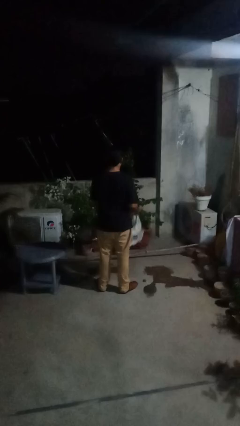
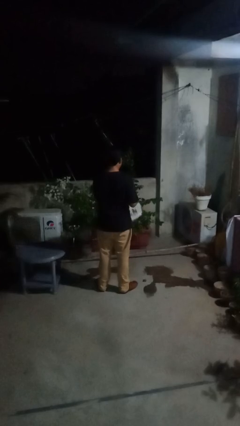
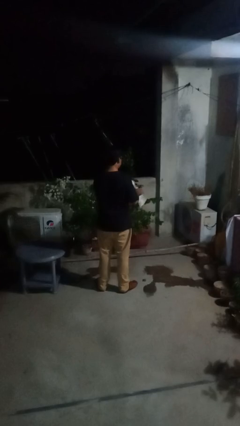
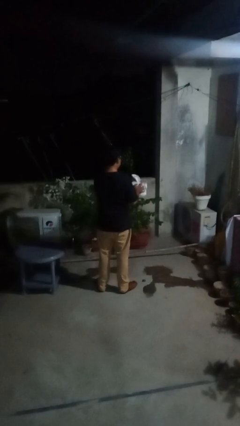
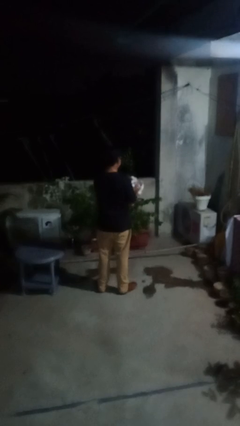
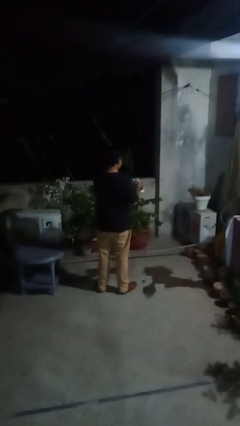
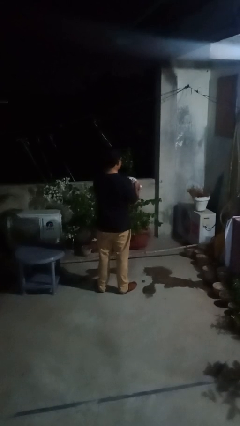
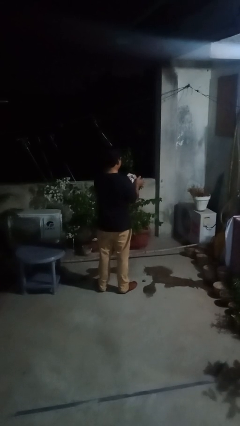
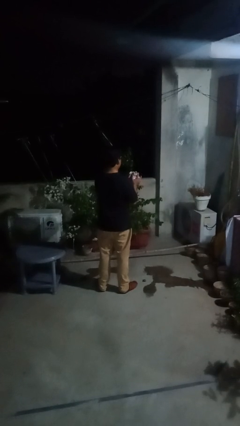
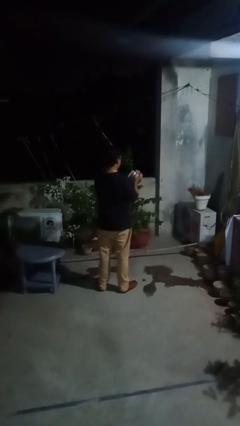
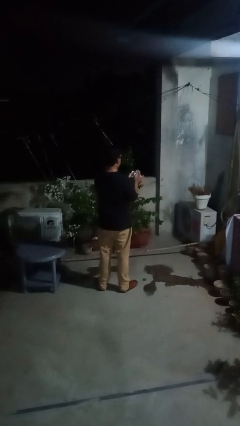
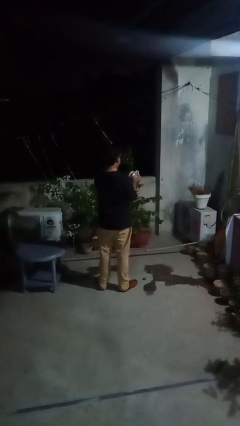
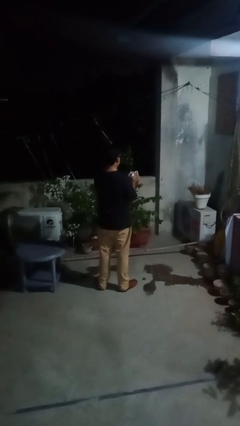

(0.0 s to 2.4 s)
person crumples paper

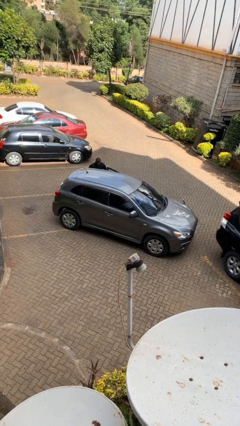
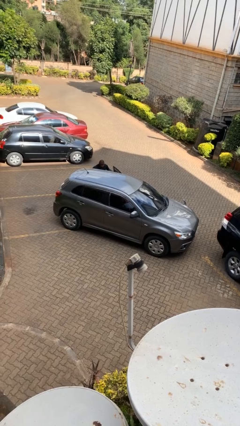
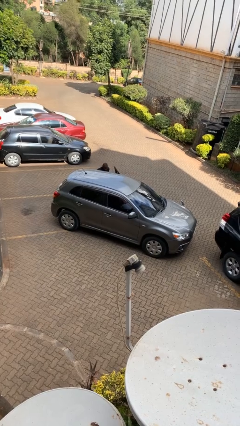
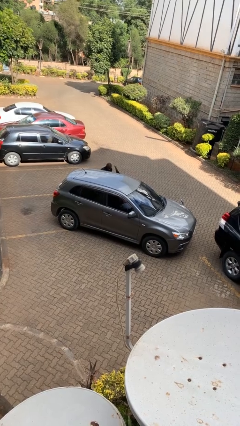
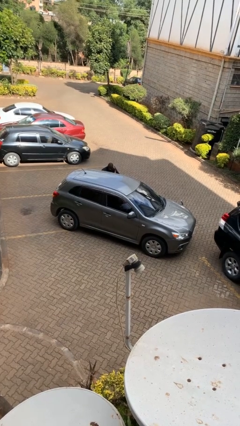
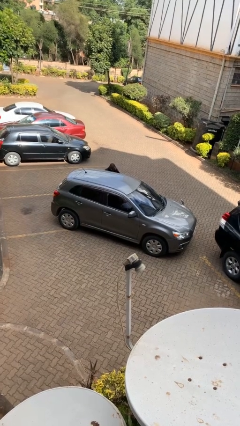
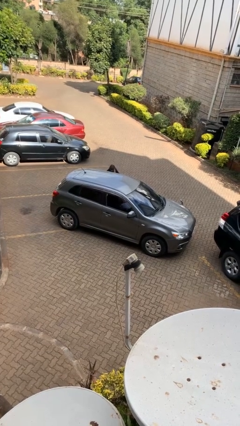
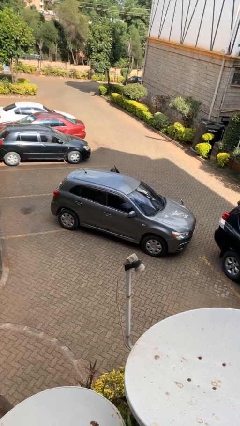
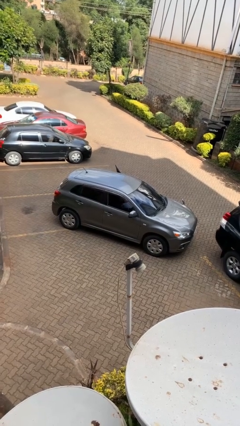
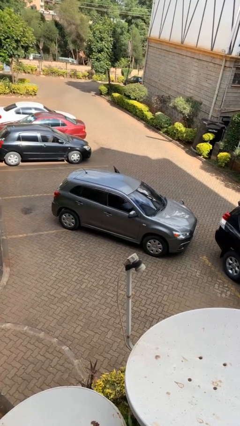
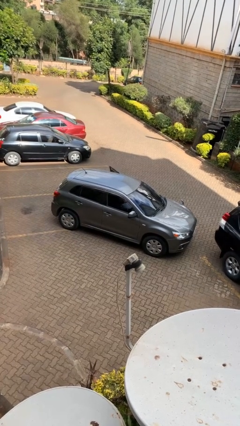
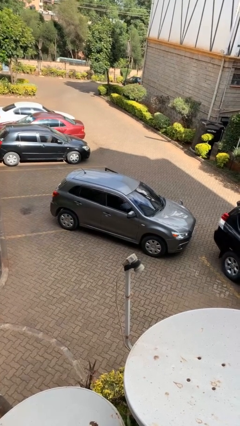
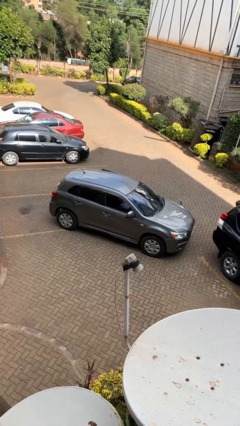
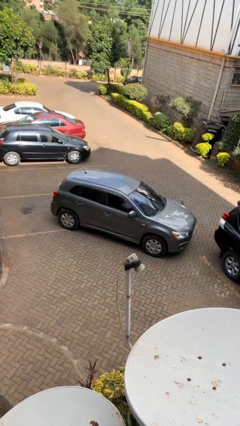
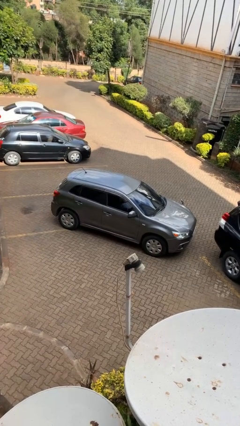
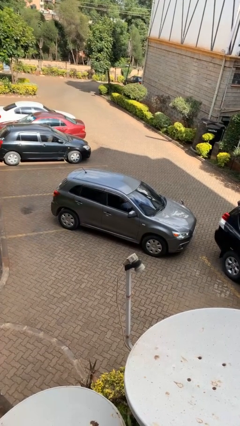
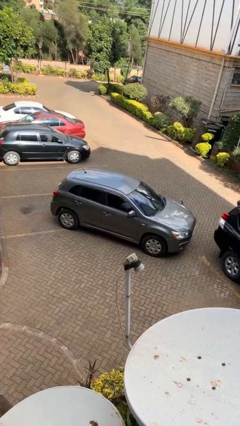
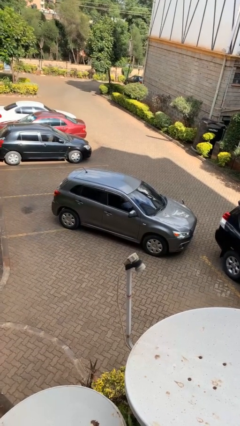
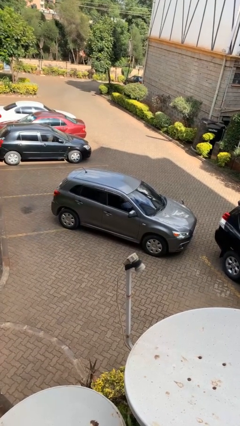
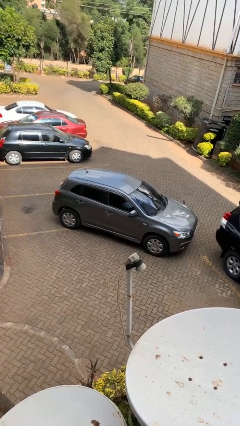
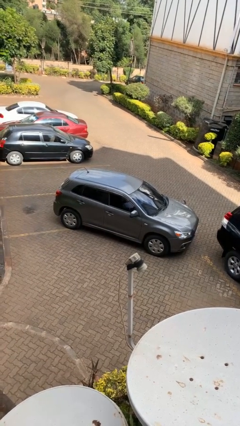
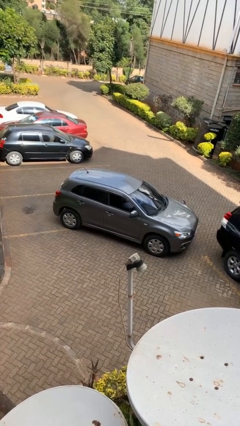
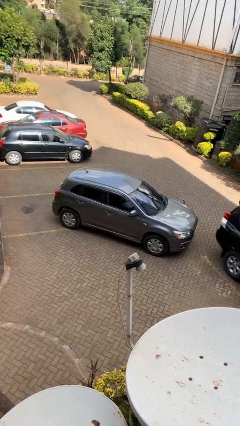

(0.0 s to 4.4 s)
car picks up person

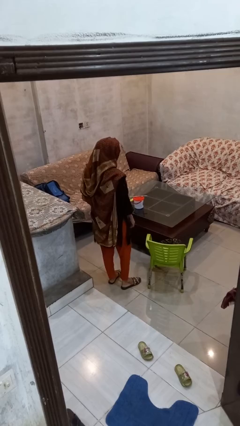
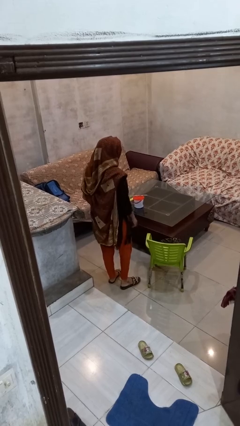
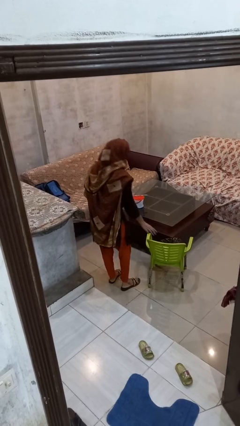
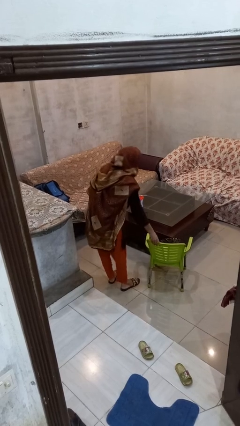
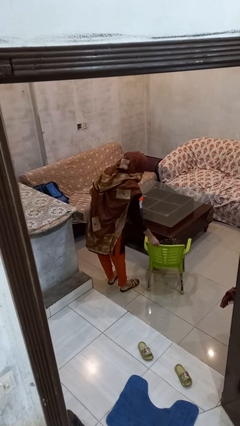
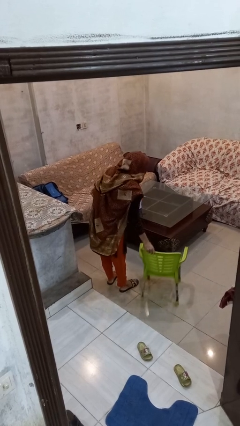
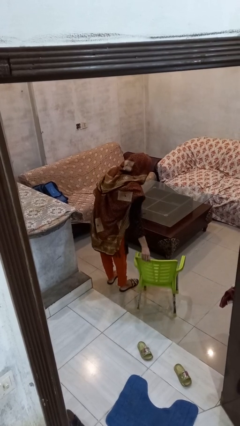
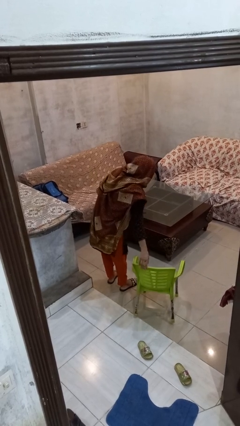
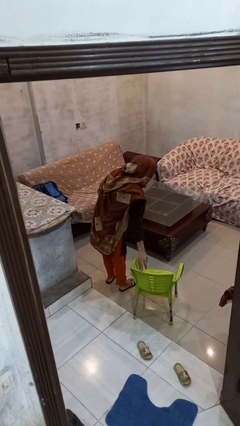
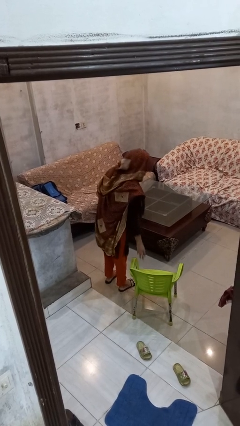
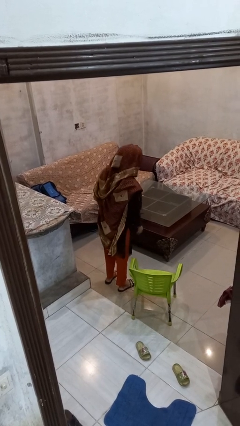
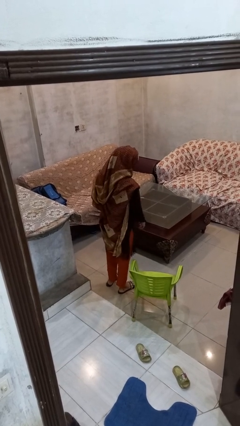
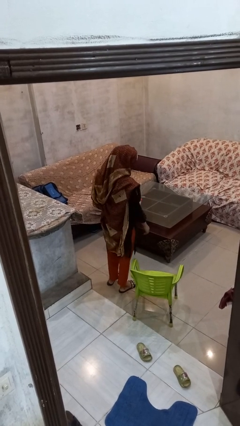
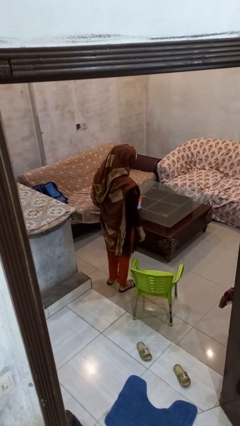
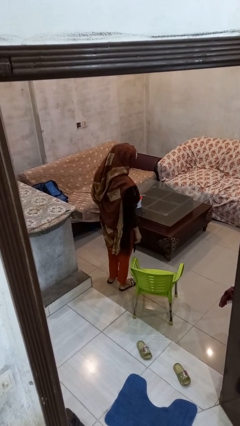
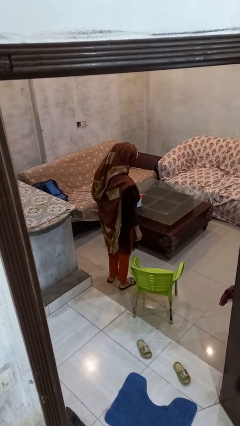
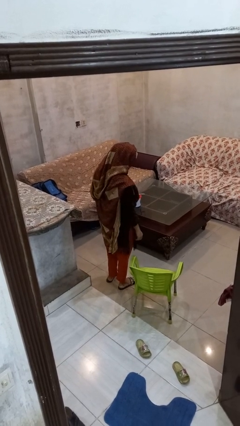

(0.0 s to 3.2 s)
person pulls out chair

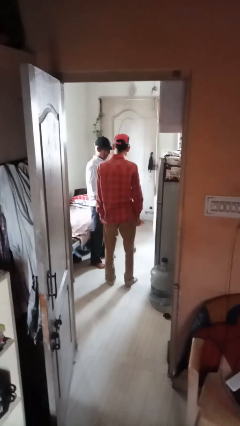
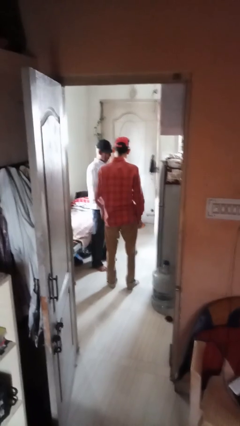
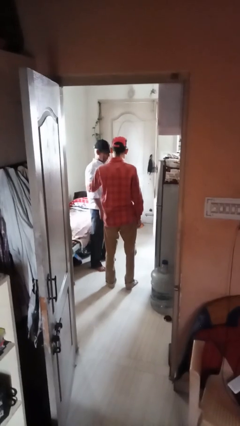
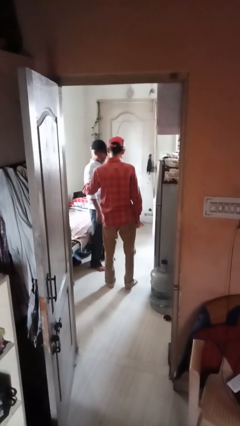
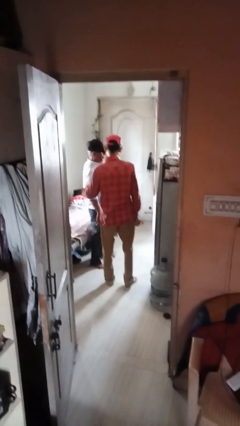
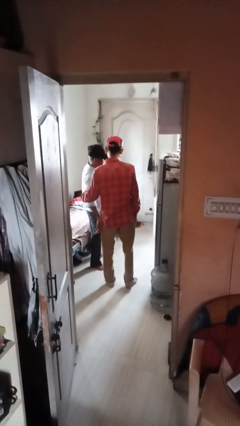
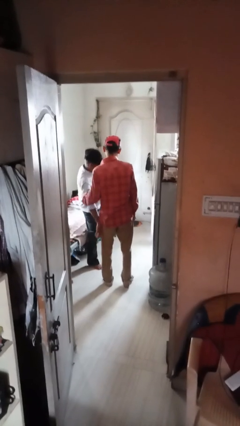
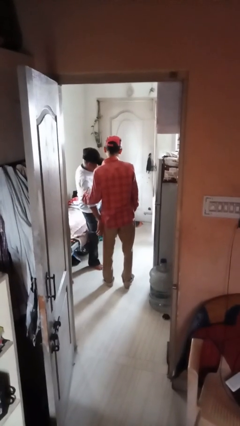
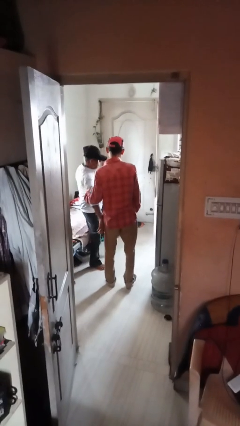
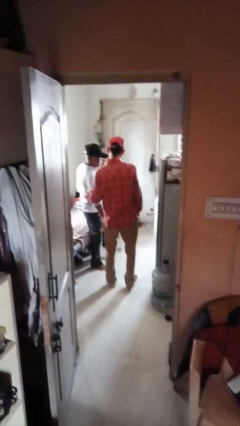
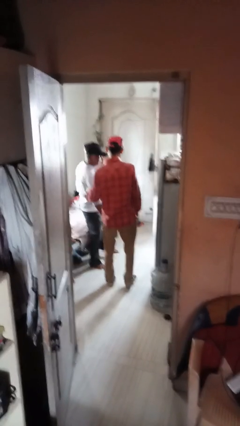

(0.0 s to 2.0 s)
person grabs person by bicep

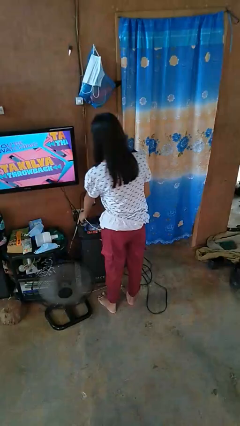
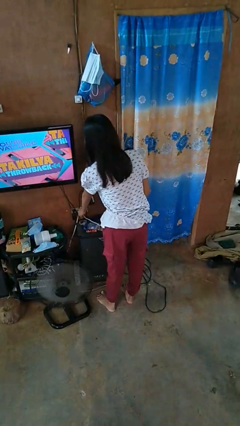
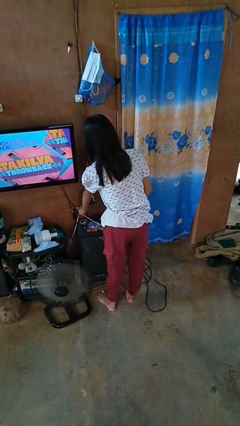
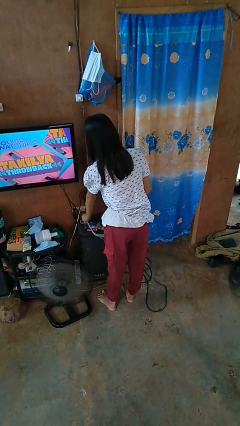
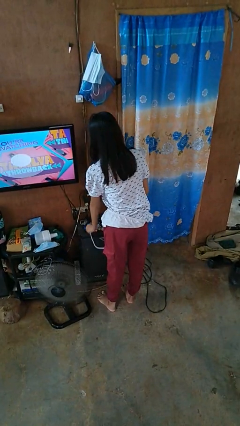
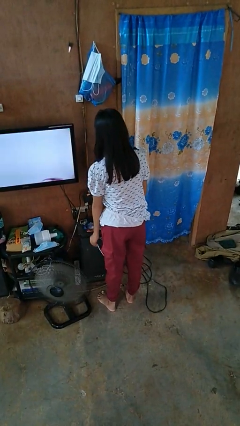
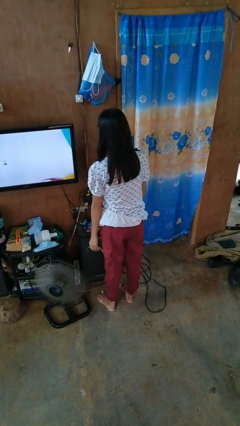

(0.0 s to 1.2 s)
person unplugs from electrical socket

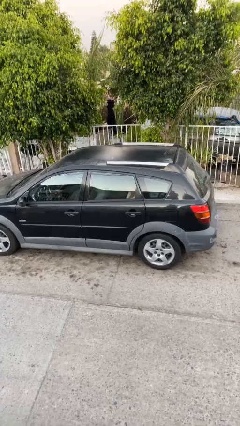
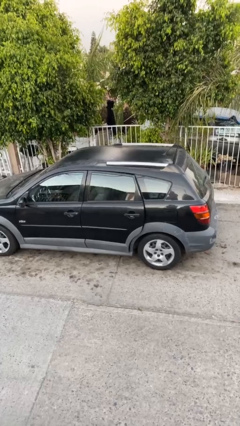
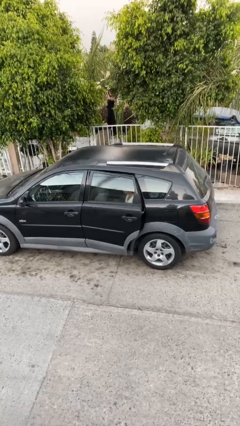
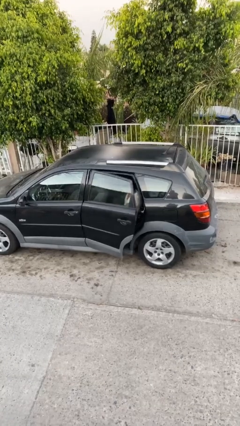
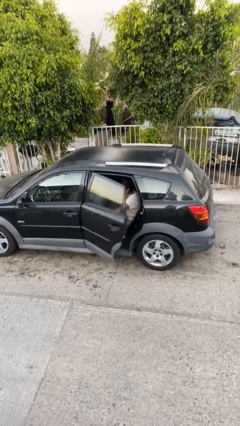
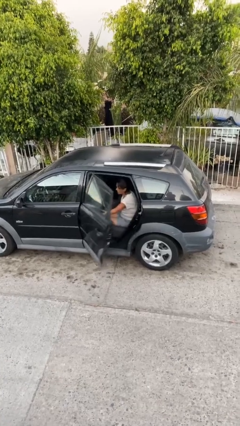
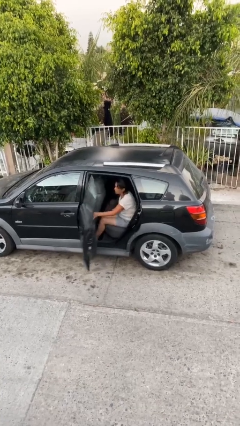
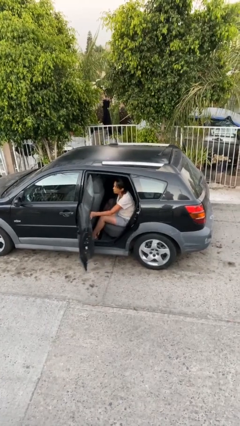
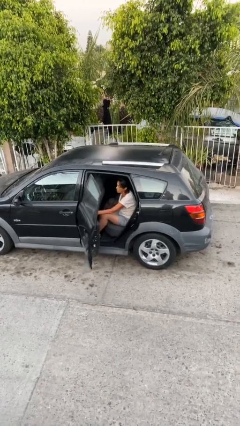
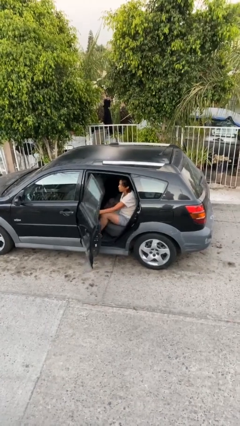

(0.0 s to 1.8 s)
person opens car door

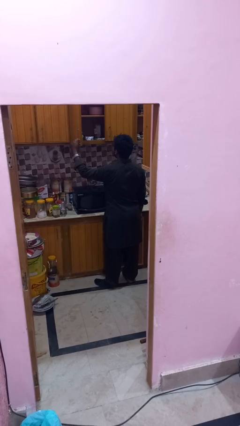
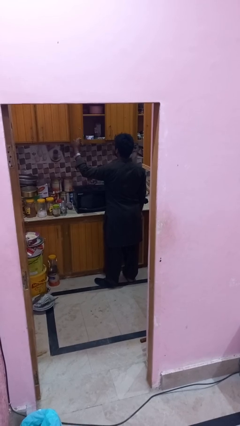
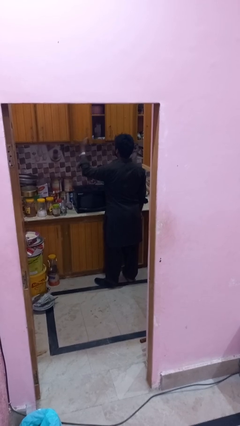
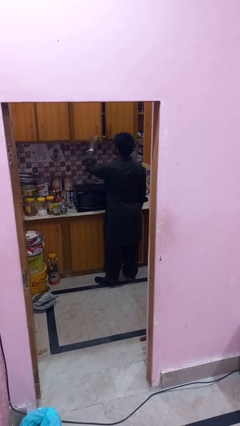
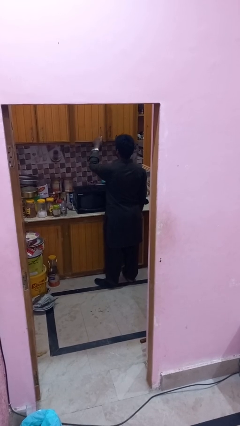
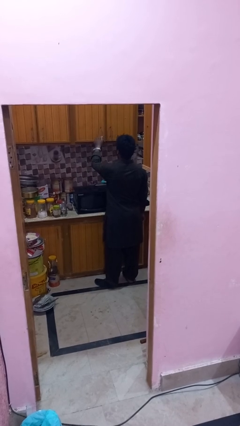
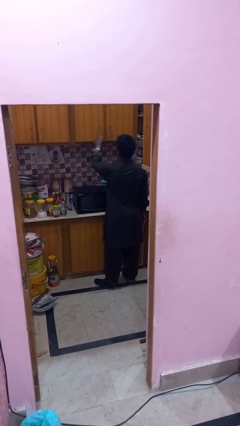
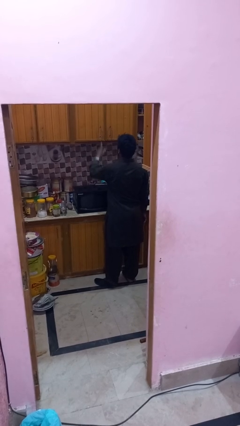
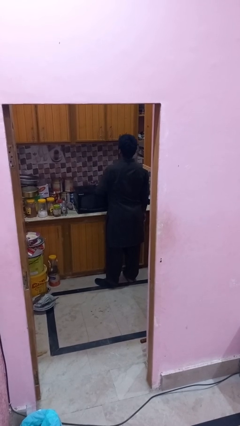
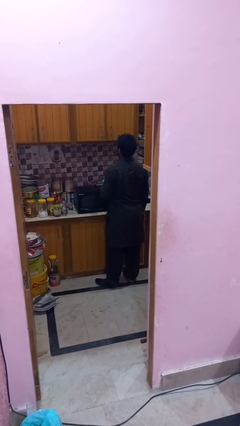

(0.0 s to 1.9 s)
person closes cabinet
